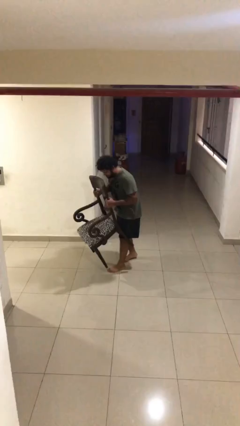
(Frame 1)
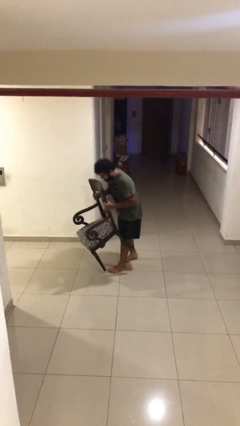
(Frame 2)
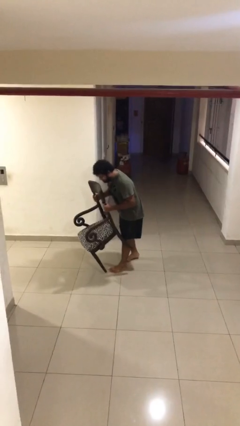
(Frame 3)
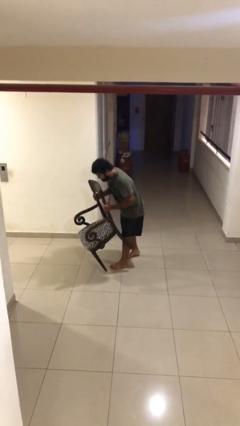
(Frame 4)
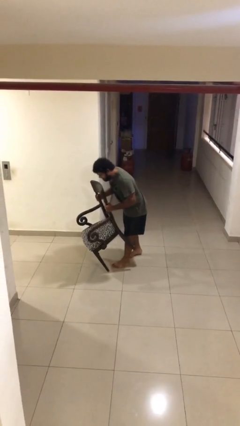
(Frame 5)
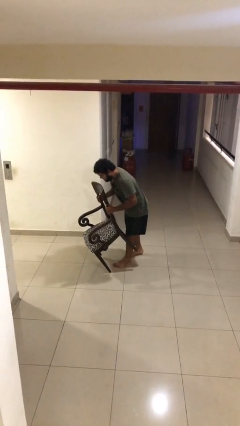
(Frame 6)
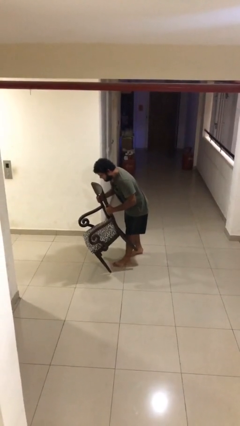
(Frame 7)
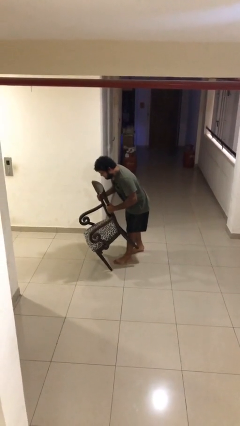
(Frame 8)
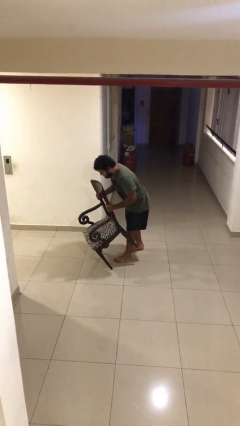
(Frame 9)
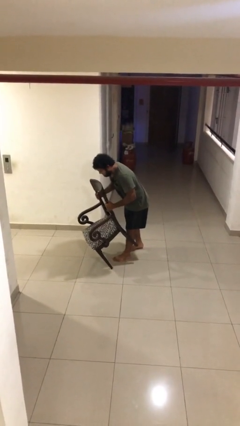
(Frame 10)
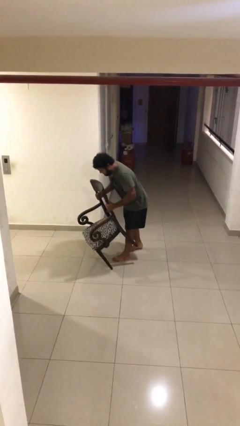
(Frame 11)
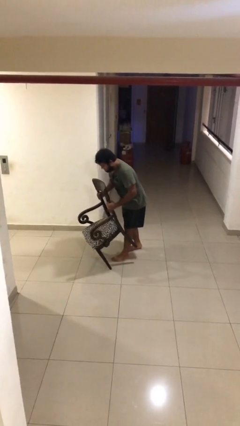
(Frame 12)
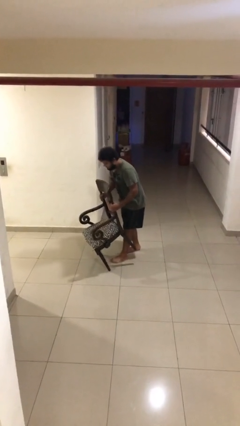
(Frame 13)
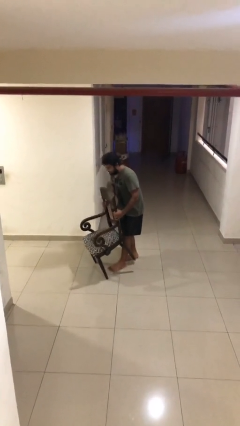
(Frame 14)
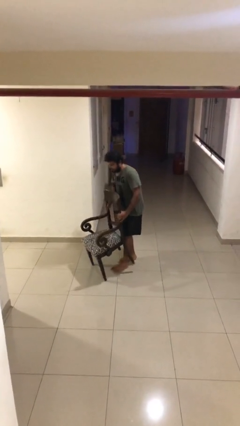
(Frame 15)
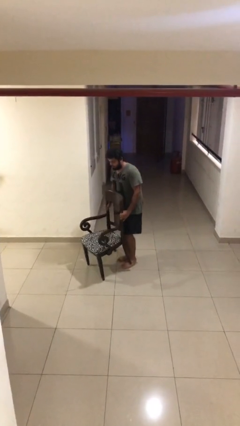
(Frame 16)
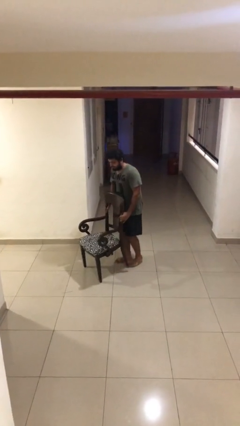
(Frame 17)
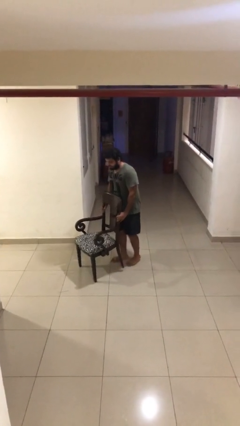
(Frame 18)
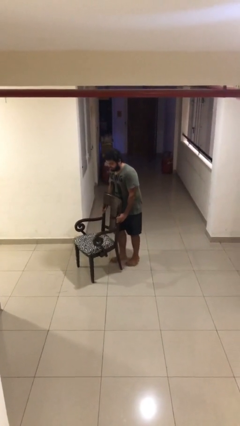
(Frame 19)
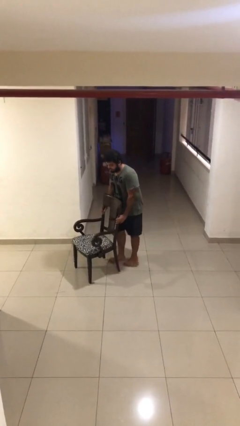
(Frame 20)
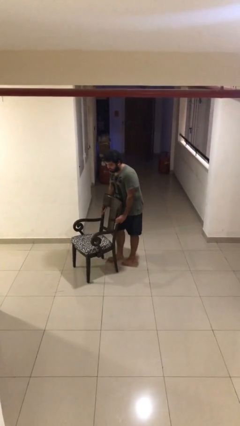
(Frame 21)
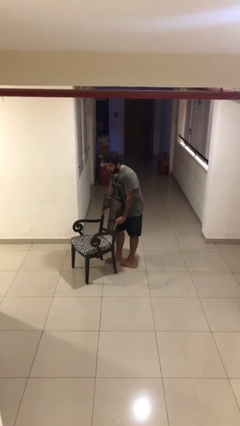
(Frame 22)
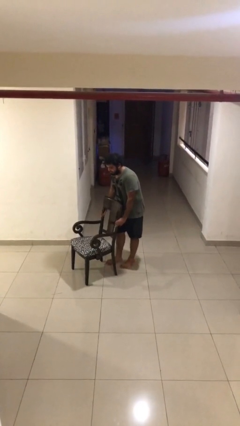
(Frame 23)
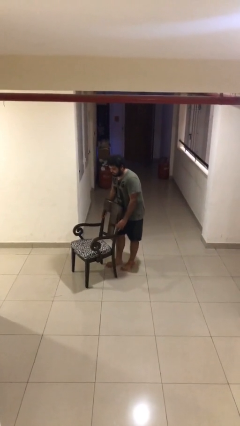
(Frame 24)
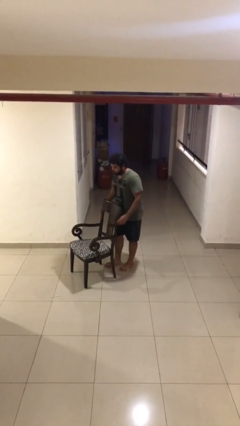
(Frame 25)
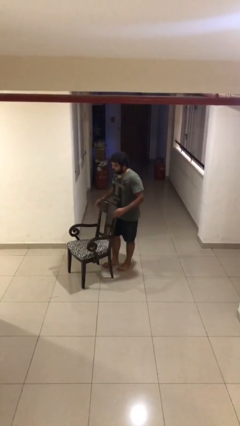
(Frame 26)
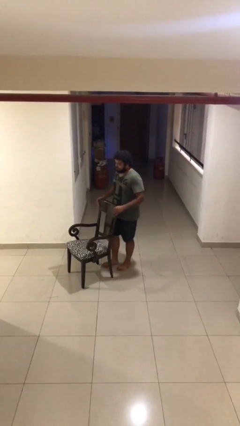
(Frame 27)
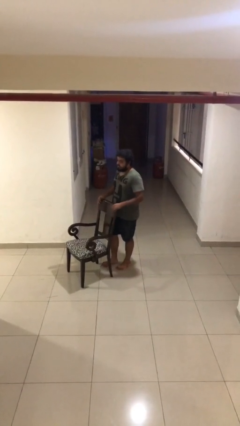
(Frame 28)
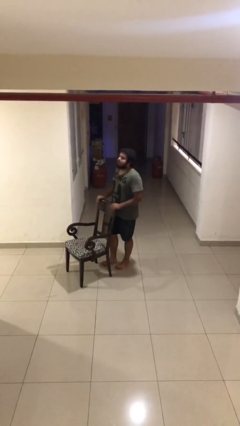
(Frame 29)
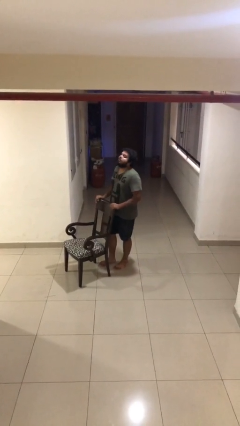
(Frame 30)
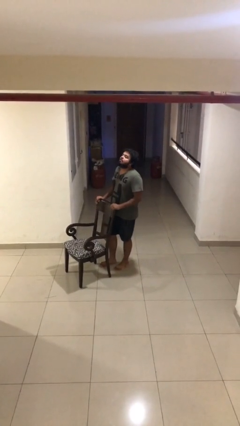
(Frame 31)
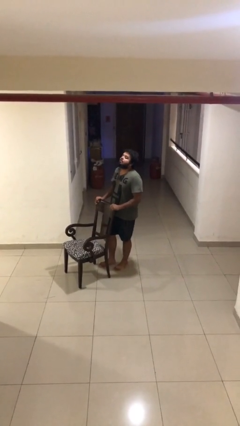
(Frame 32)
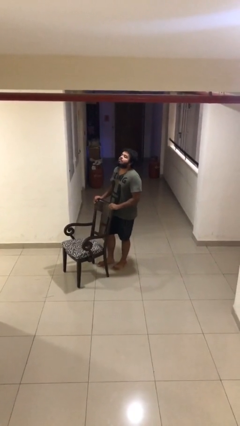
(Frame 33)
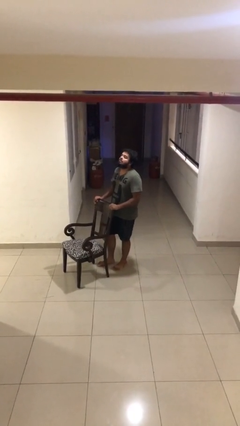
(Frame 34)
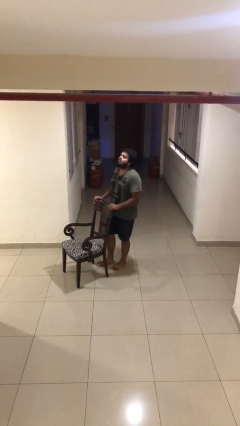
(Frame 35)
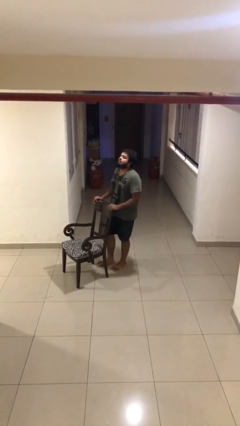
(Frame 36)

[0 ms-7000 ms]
person puts down object on floor

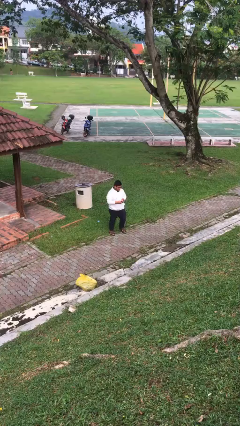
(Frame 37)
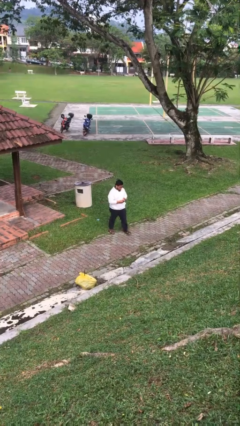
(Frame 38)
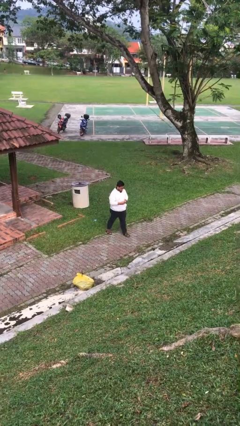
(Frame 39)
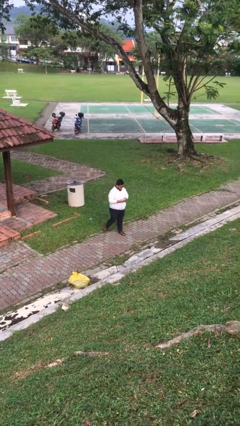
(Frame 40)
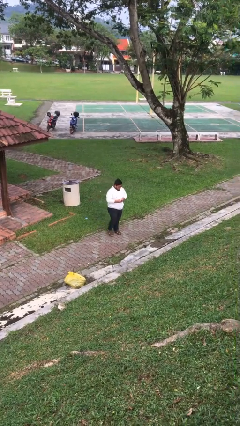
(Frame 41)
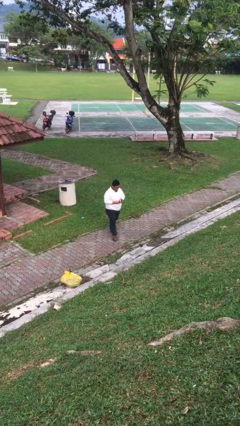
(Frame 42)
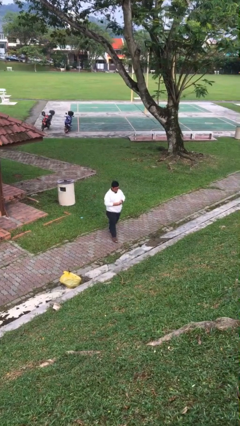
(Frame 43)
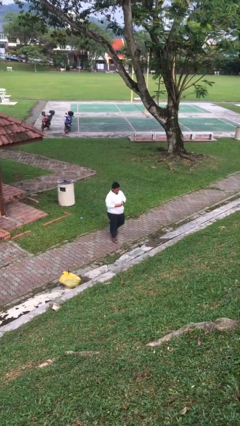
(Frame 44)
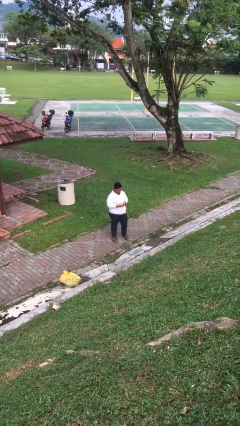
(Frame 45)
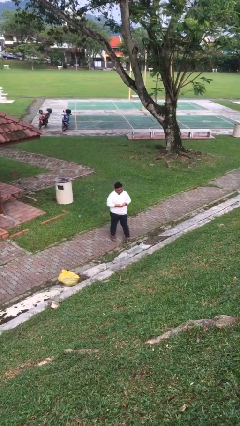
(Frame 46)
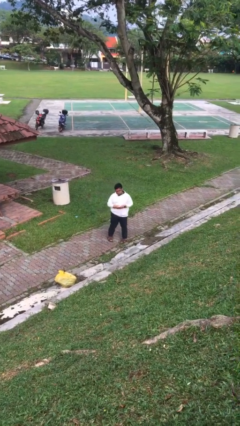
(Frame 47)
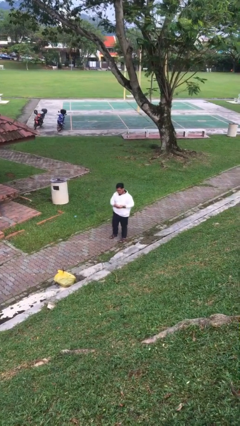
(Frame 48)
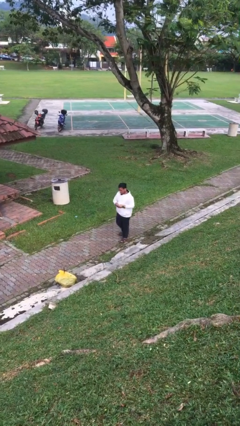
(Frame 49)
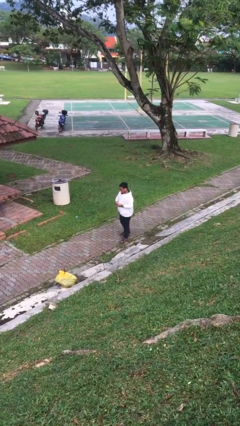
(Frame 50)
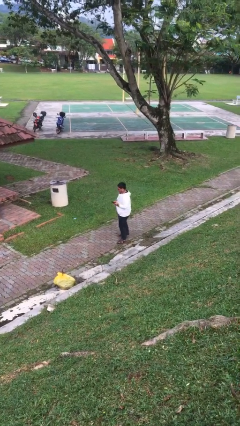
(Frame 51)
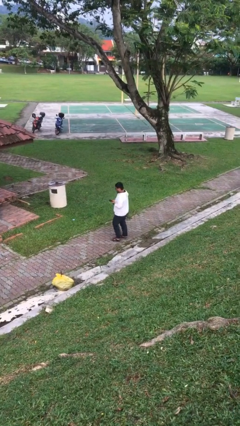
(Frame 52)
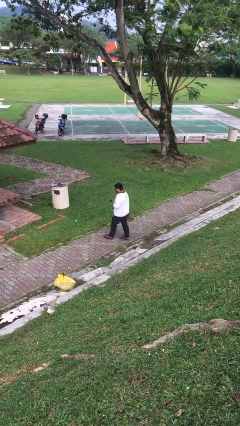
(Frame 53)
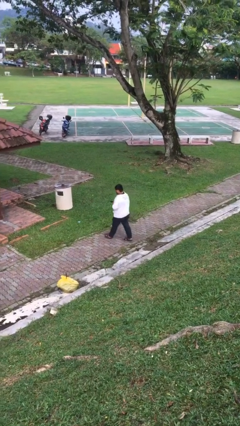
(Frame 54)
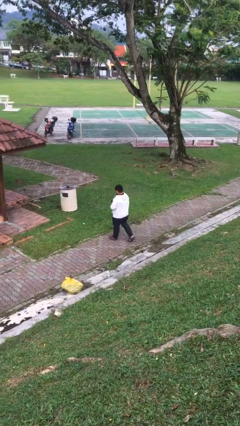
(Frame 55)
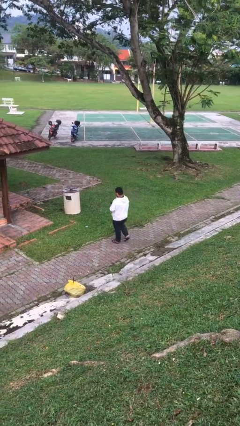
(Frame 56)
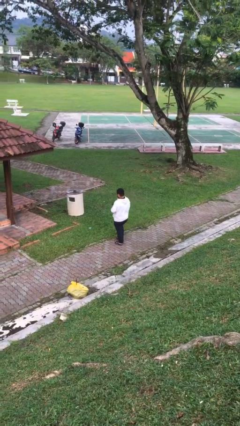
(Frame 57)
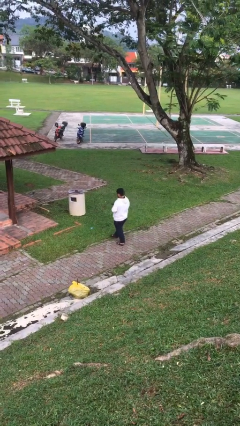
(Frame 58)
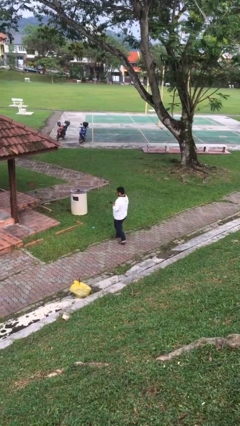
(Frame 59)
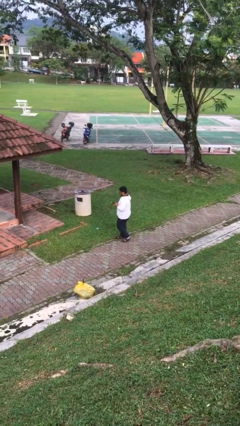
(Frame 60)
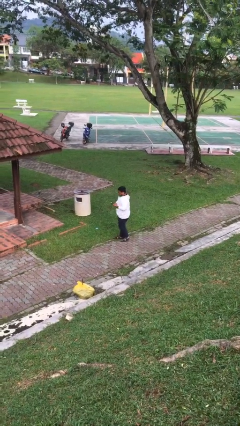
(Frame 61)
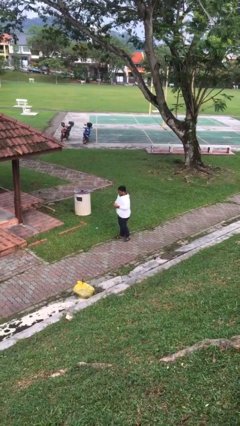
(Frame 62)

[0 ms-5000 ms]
person texts on phone

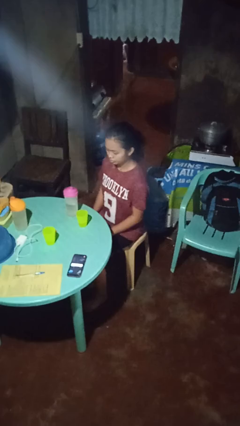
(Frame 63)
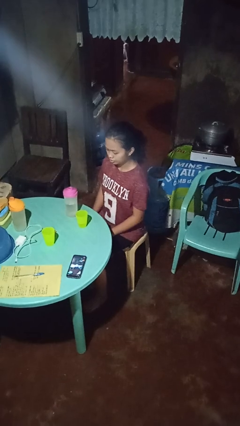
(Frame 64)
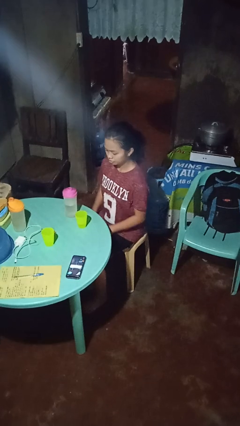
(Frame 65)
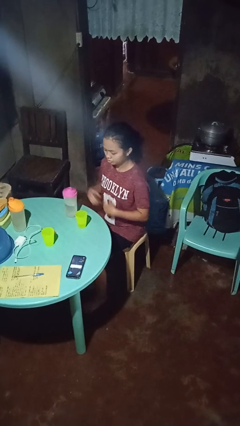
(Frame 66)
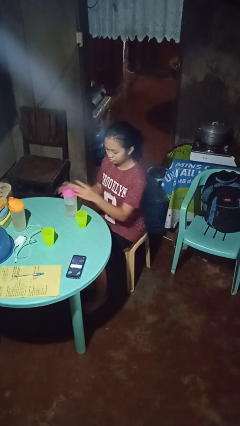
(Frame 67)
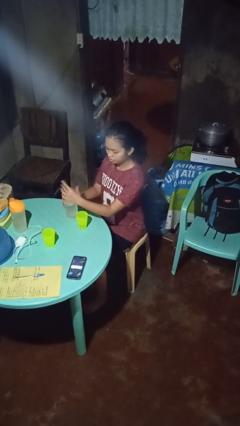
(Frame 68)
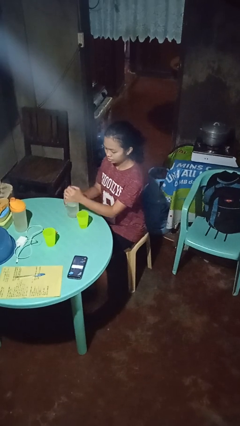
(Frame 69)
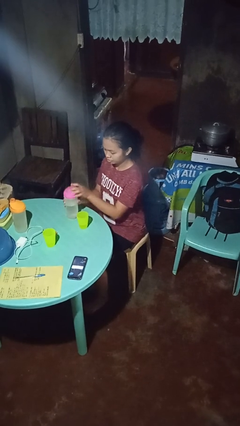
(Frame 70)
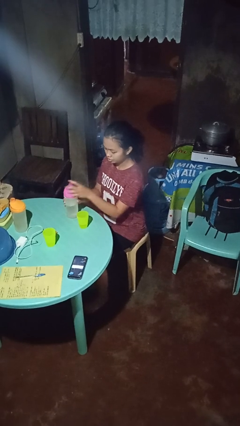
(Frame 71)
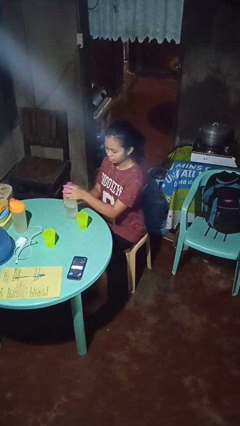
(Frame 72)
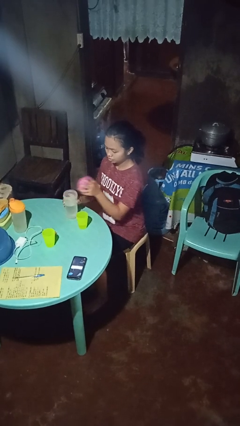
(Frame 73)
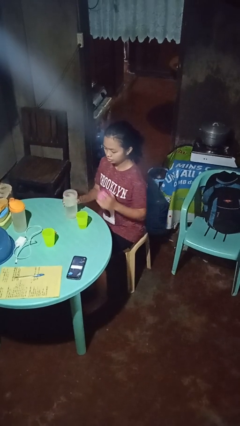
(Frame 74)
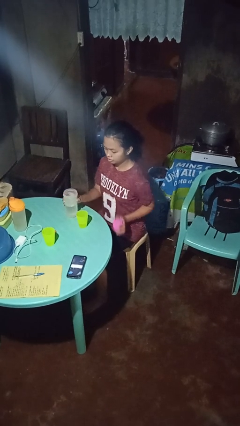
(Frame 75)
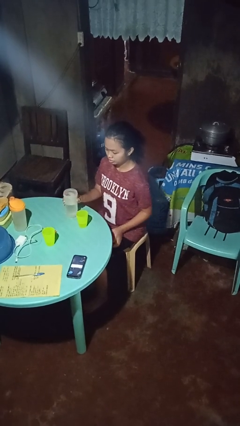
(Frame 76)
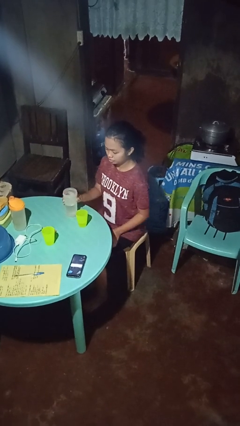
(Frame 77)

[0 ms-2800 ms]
person unscrews lid from bottle

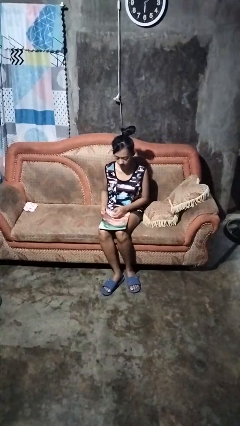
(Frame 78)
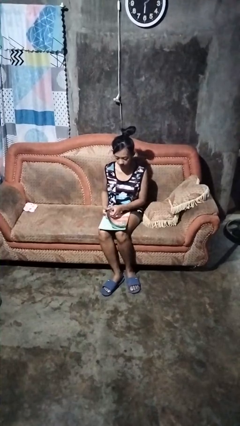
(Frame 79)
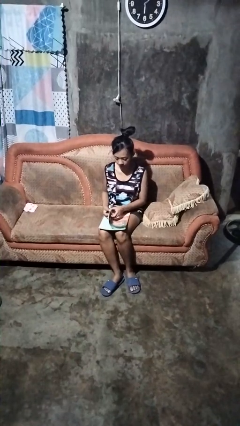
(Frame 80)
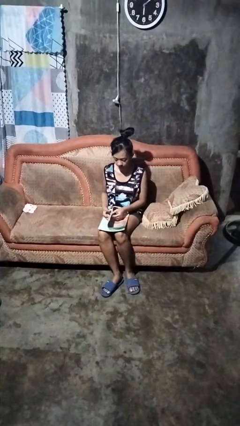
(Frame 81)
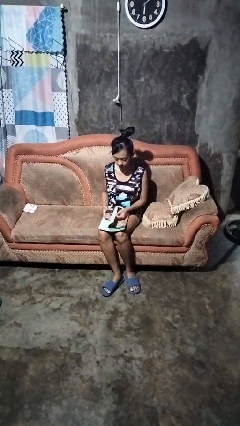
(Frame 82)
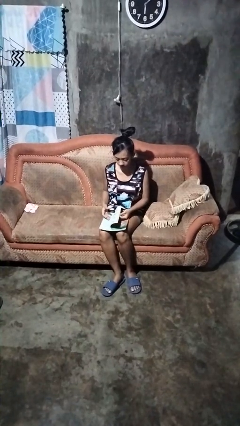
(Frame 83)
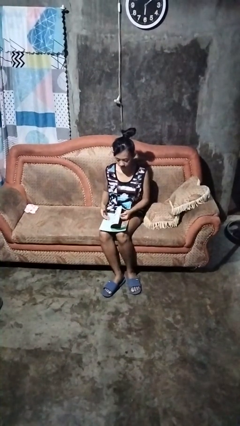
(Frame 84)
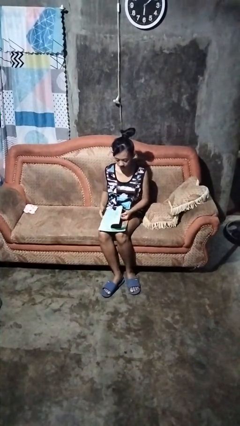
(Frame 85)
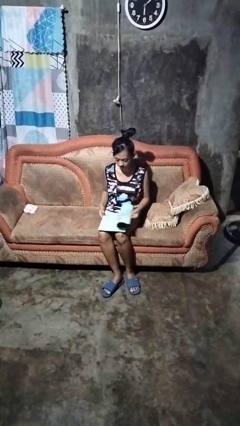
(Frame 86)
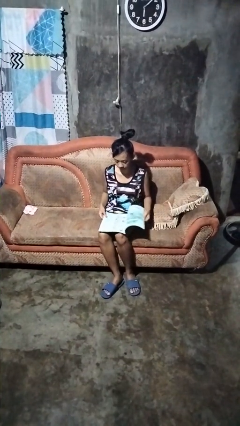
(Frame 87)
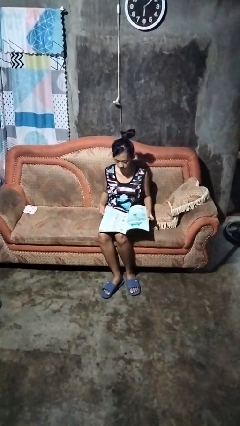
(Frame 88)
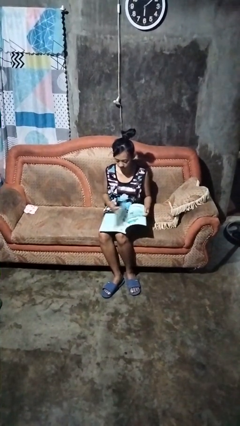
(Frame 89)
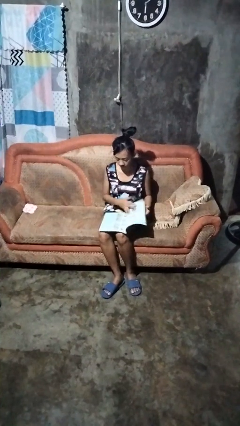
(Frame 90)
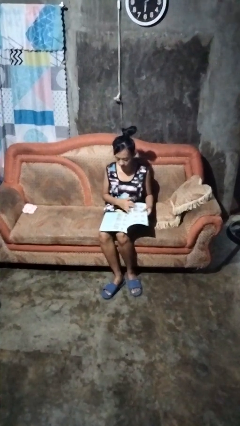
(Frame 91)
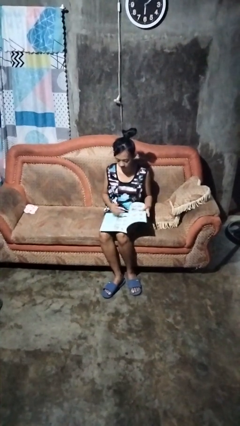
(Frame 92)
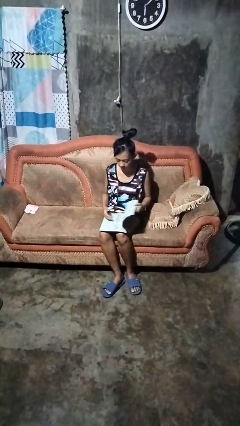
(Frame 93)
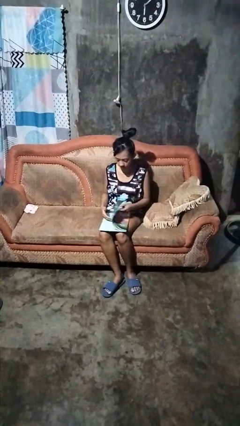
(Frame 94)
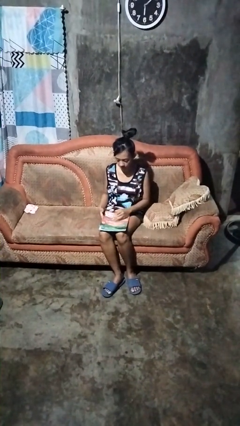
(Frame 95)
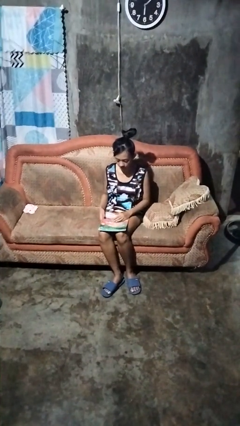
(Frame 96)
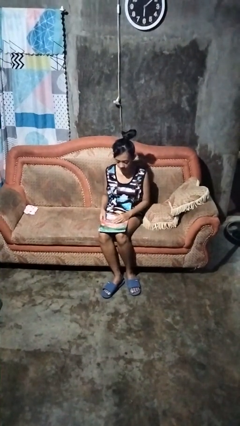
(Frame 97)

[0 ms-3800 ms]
person reads magazine
